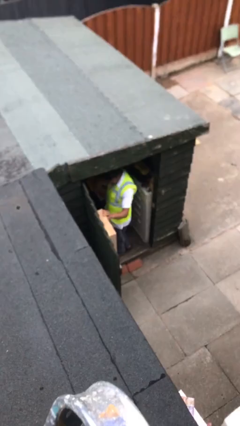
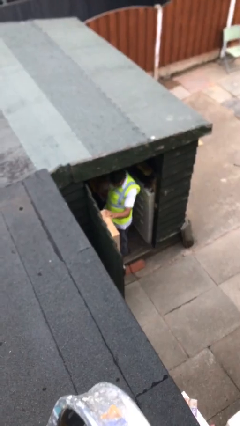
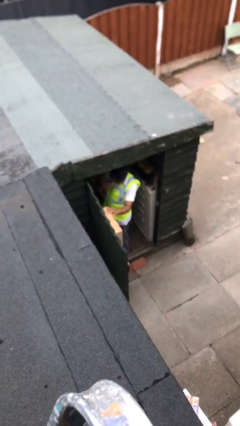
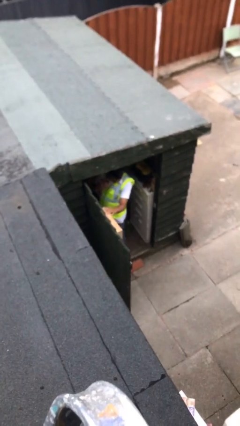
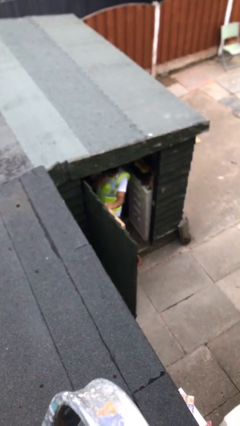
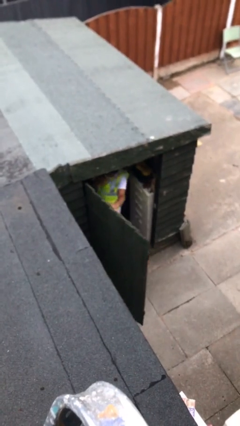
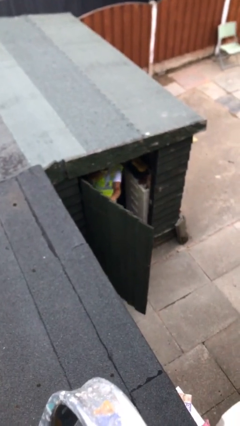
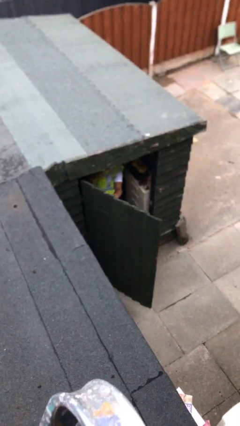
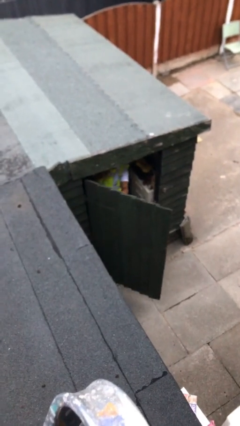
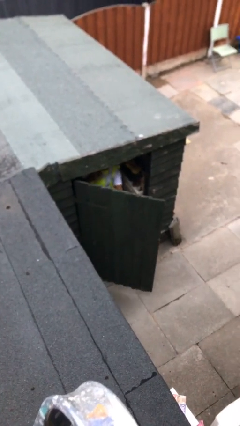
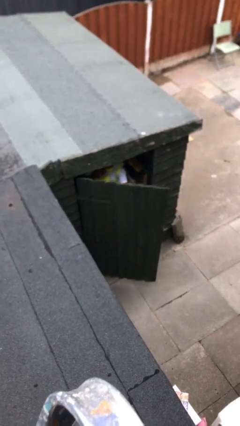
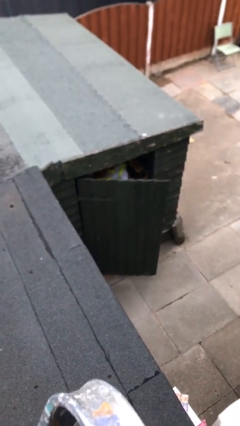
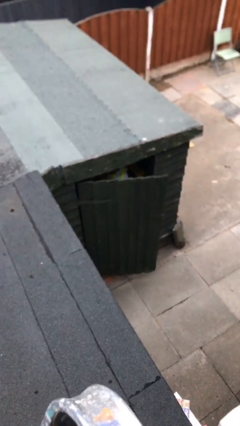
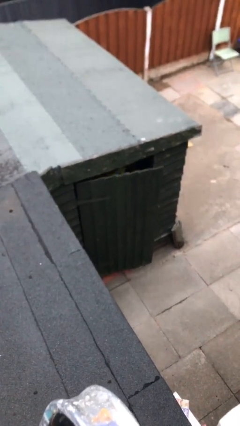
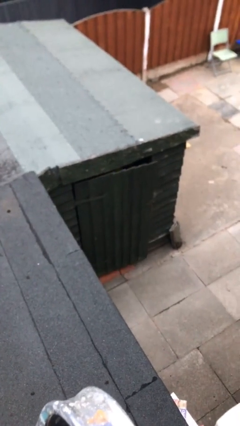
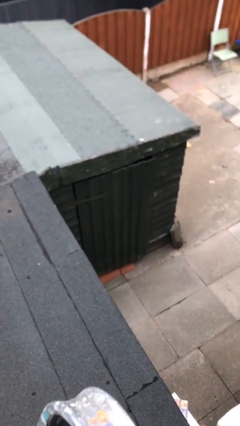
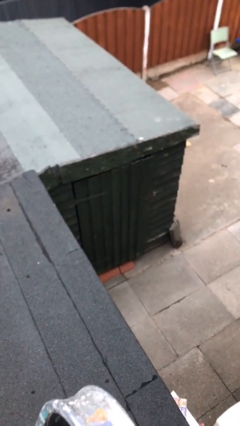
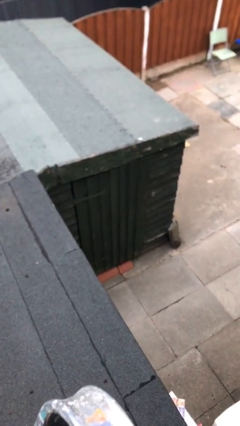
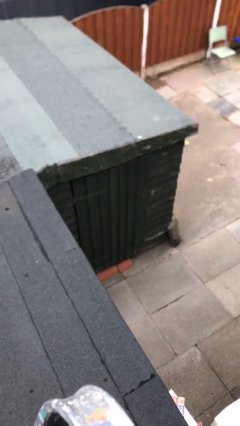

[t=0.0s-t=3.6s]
person closes facility door

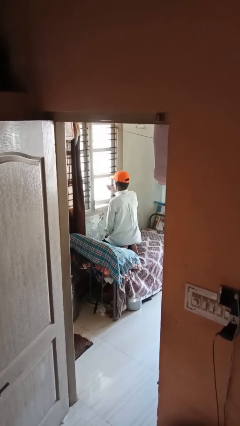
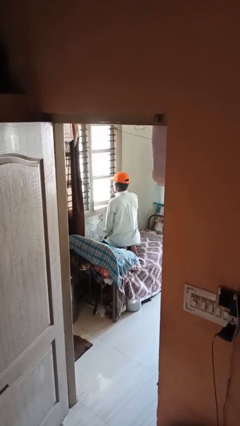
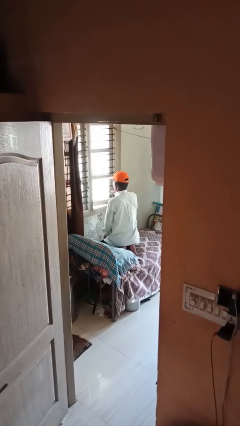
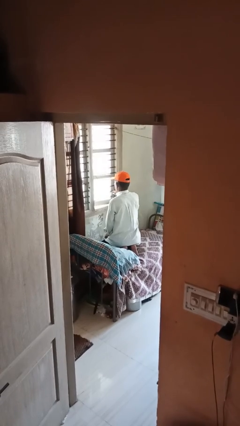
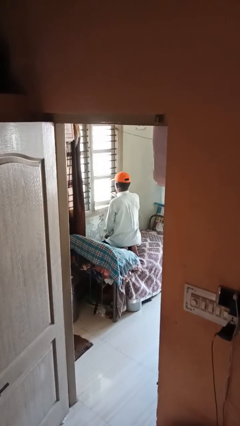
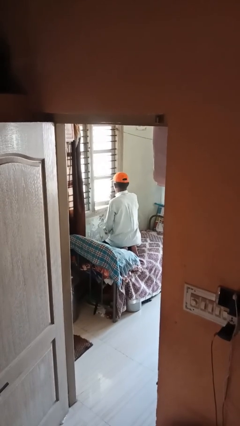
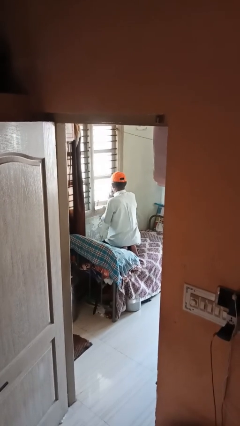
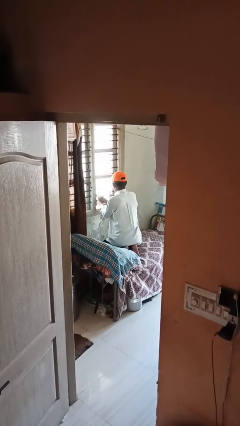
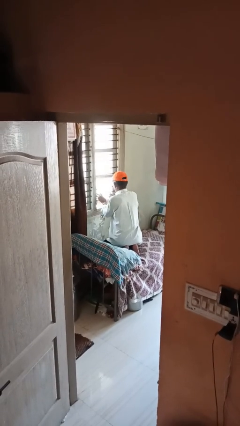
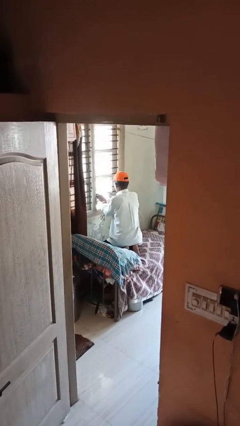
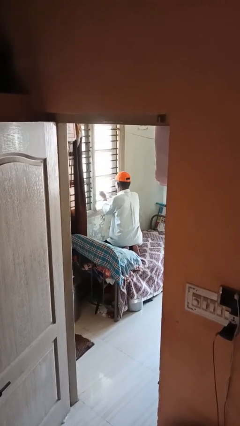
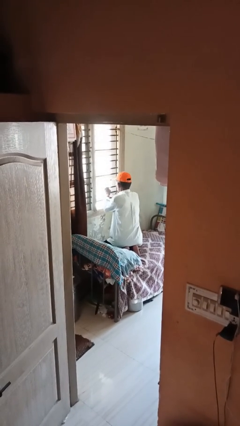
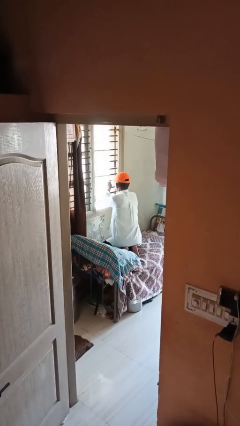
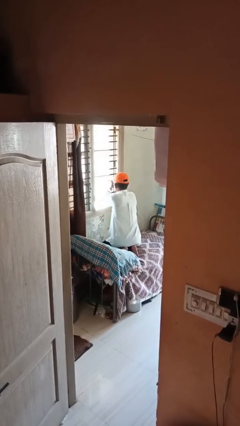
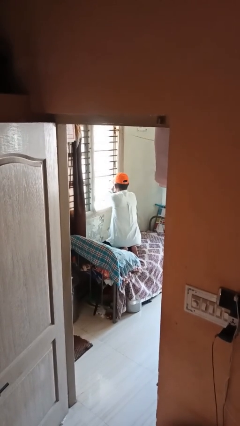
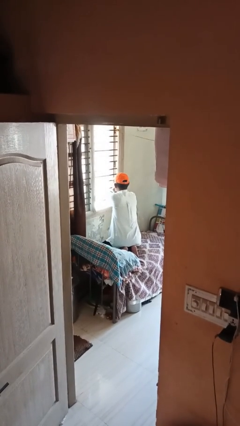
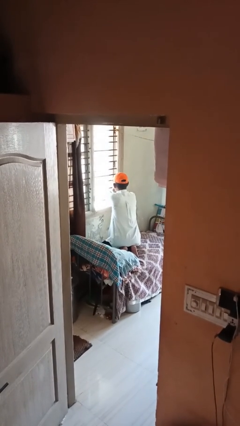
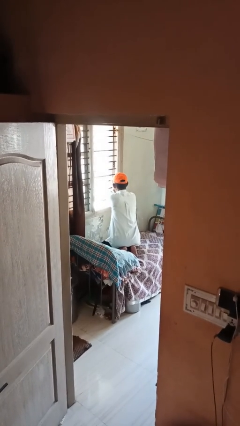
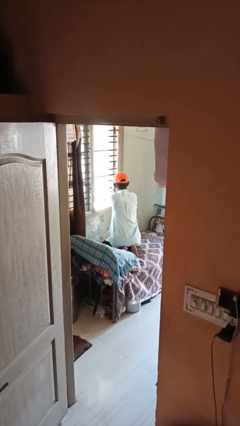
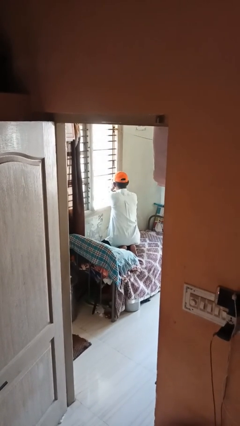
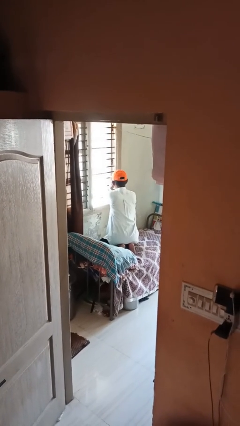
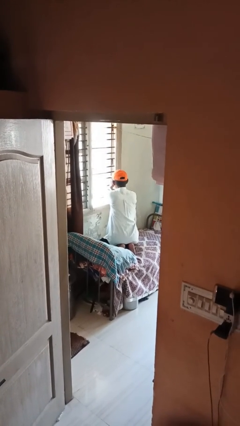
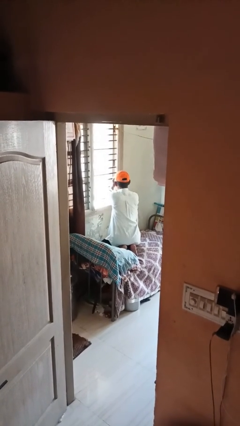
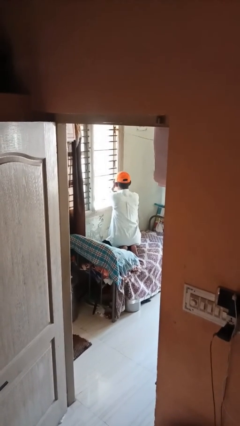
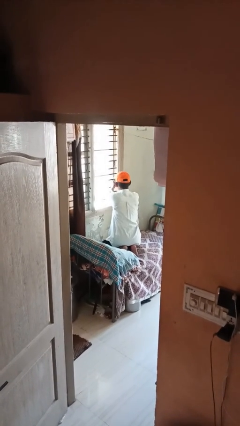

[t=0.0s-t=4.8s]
person opens home window

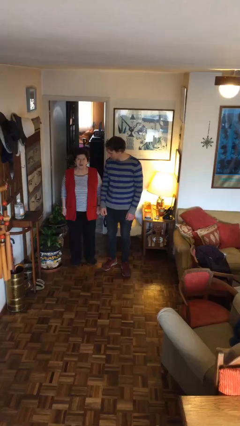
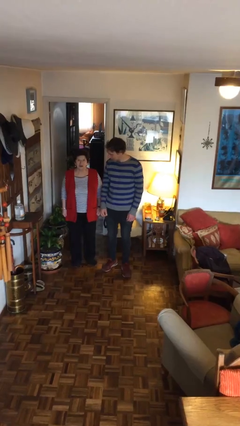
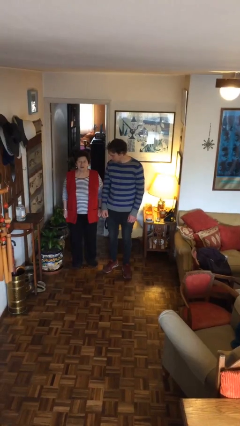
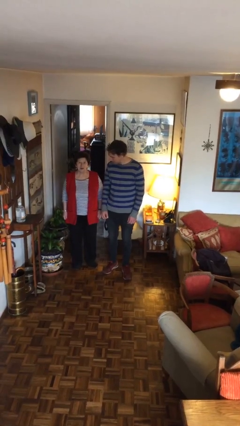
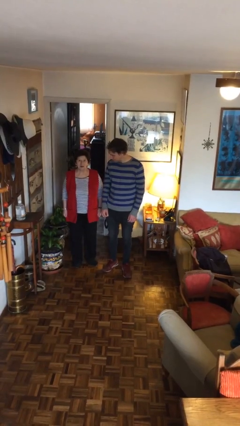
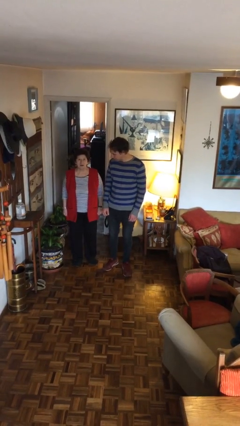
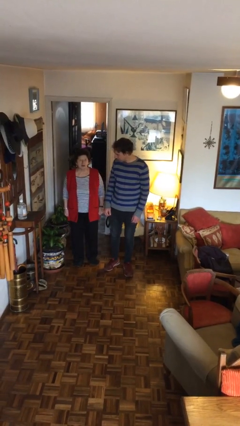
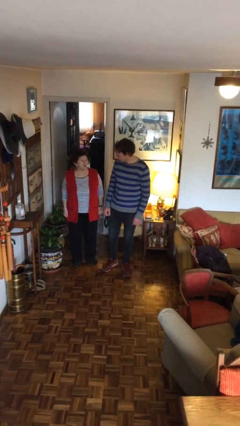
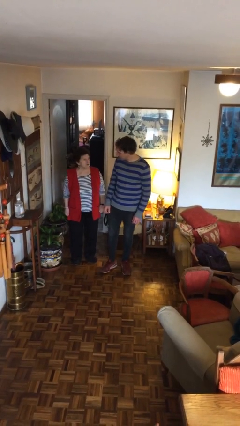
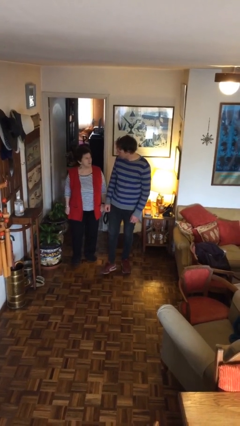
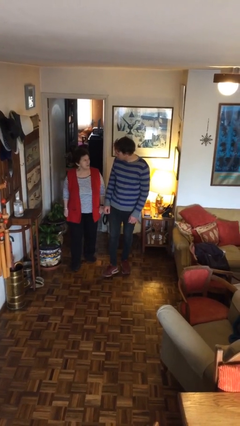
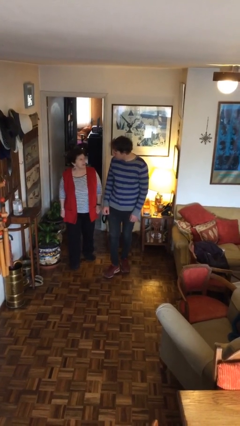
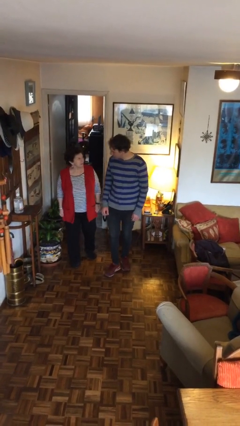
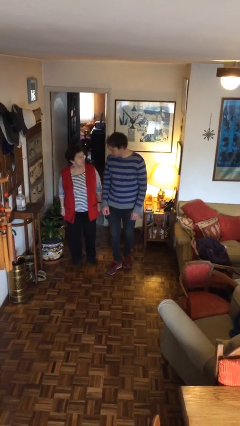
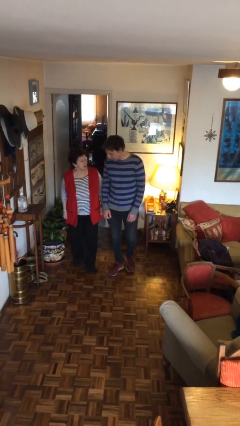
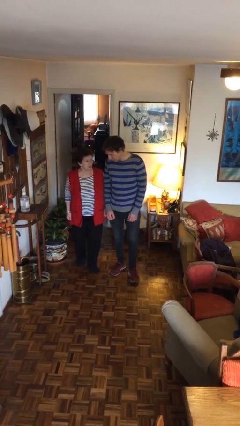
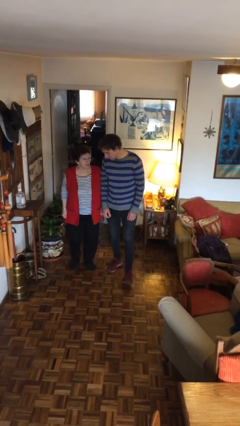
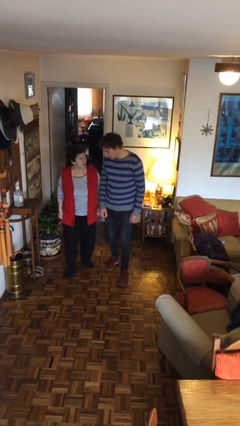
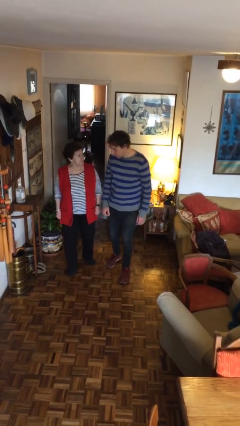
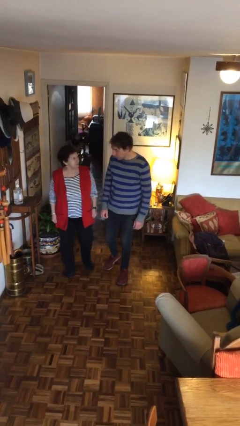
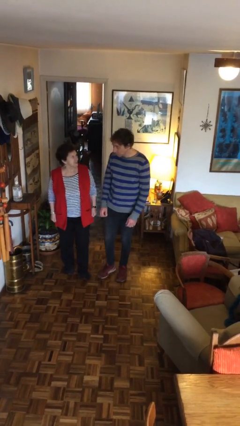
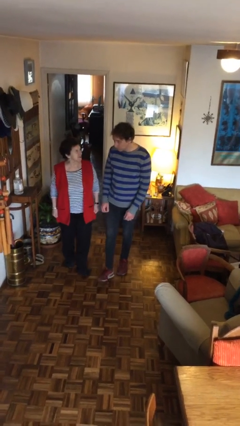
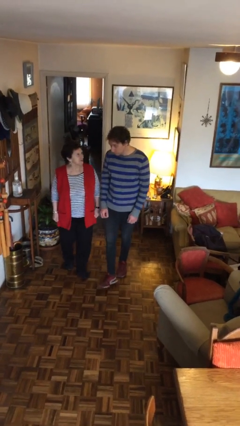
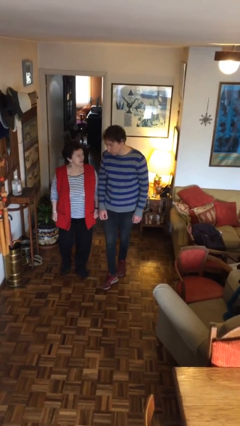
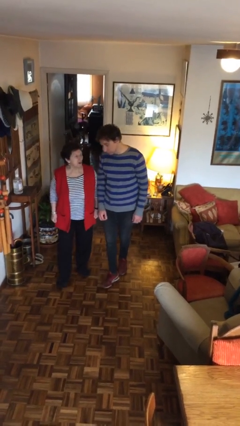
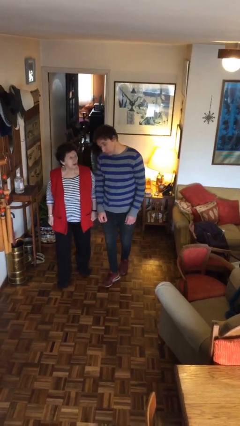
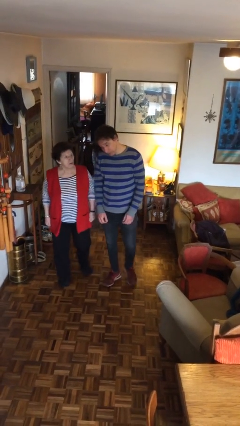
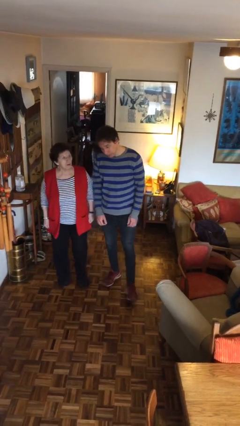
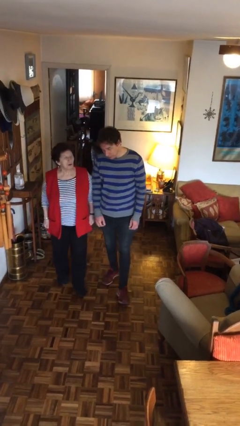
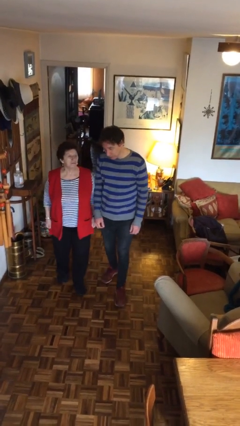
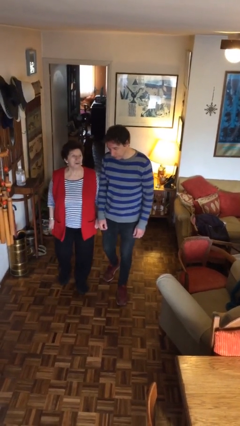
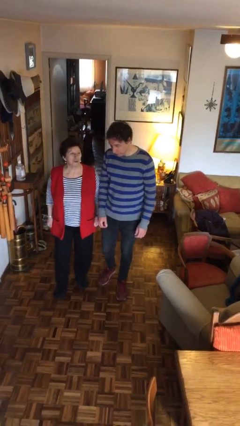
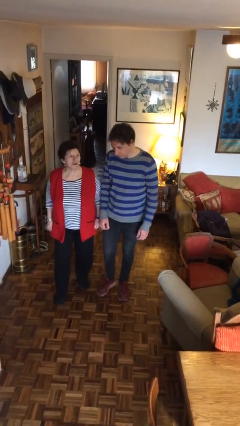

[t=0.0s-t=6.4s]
person talks to person

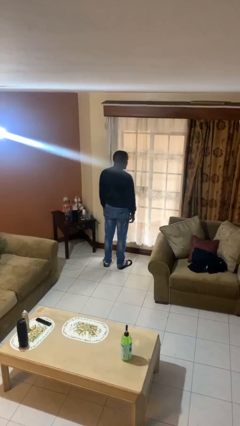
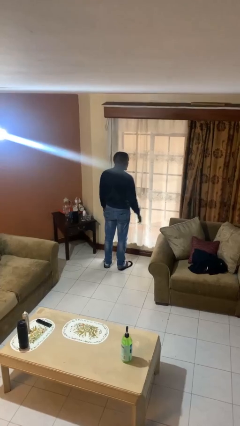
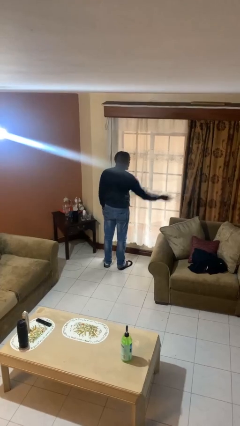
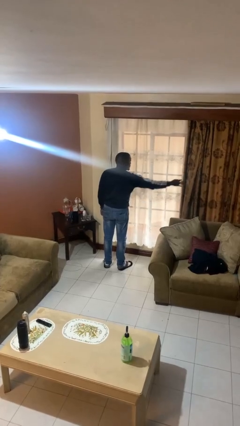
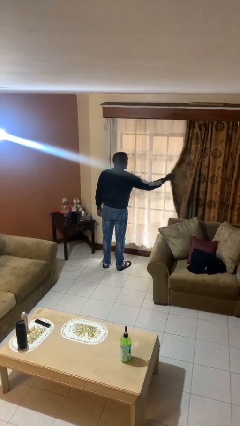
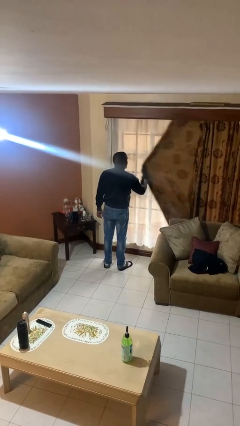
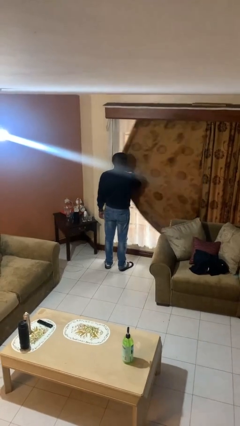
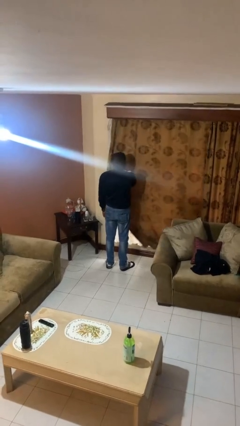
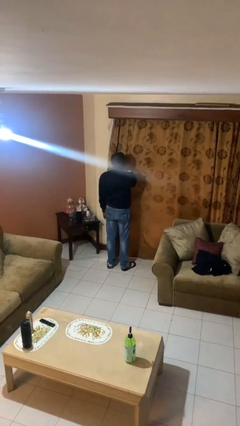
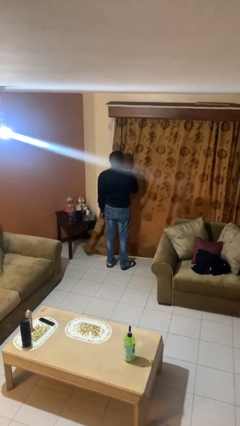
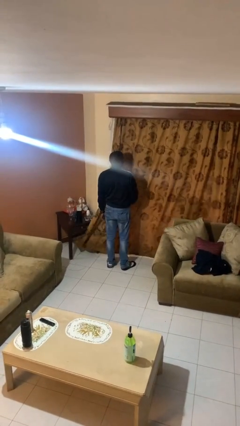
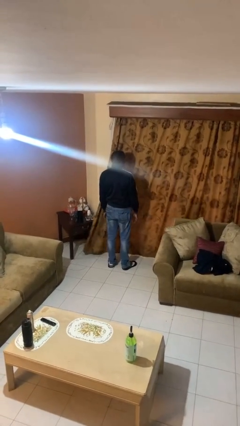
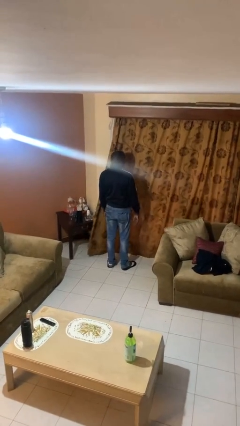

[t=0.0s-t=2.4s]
person closes curtains

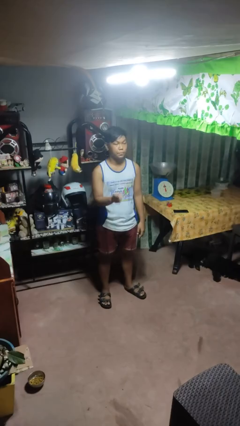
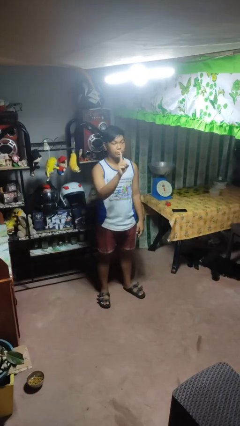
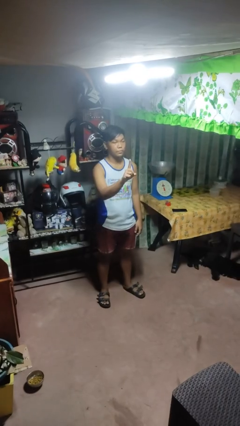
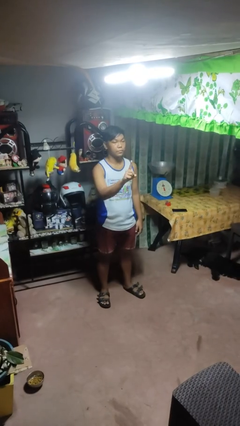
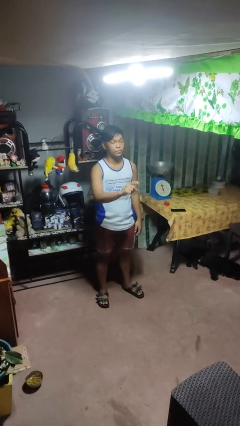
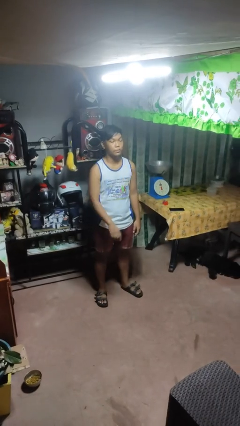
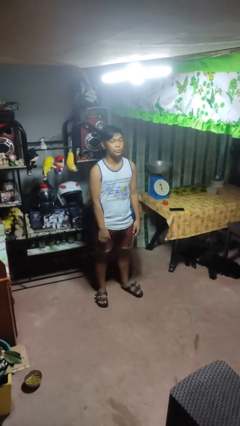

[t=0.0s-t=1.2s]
person gestures number one
